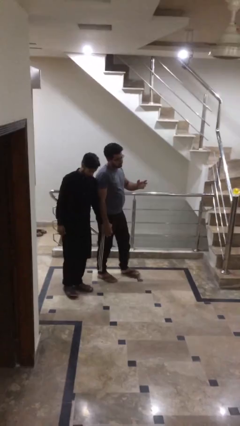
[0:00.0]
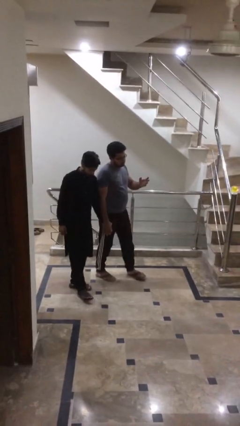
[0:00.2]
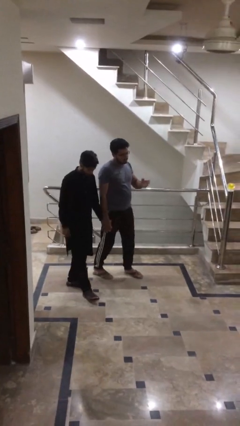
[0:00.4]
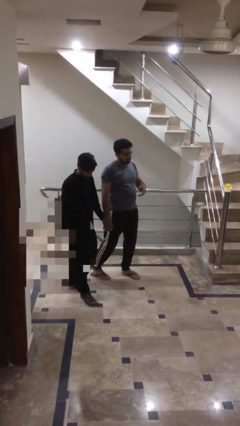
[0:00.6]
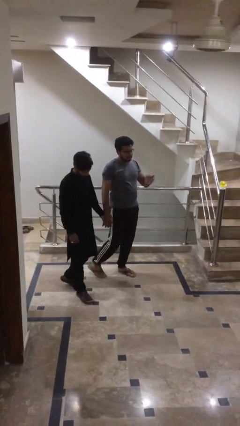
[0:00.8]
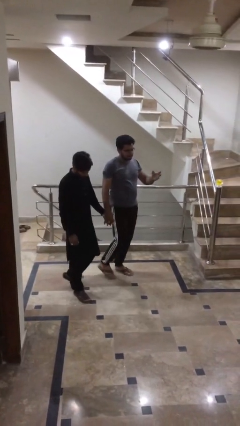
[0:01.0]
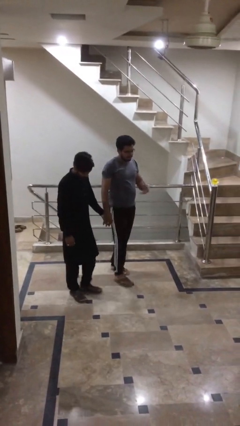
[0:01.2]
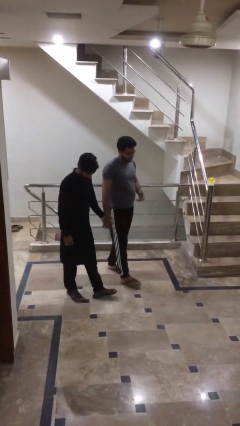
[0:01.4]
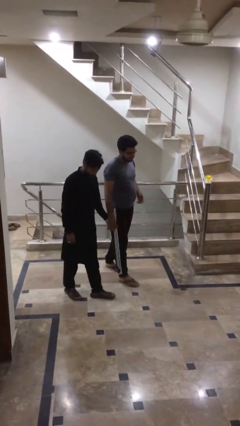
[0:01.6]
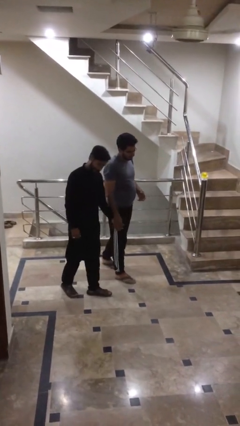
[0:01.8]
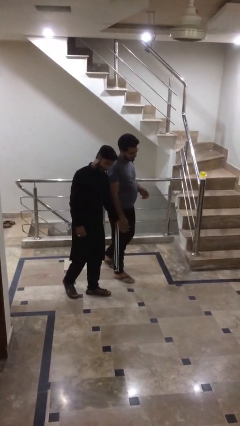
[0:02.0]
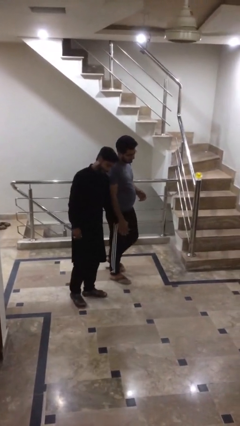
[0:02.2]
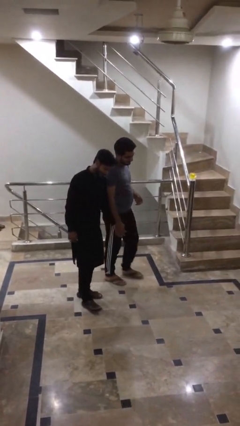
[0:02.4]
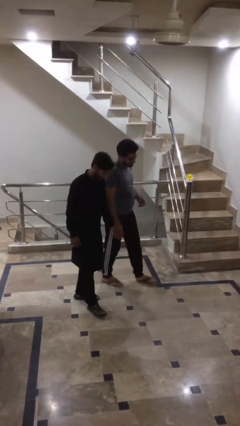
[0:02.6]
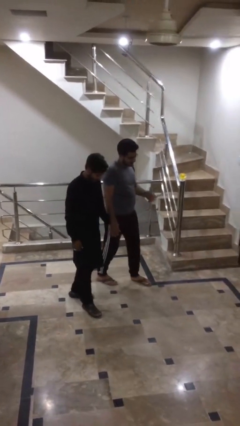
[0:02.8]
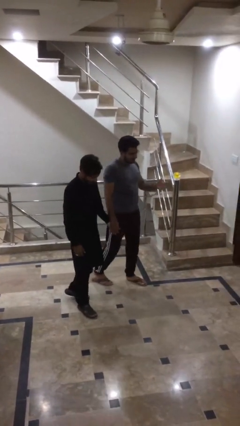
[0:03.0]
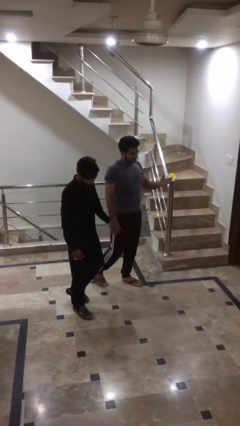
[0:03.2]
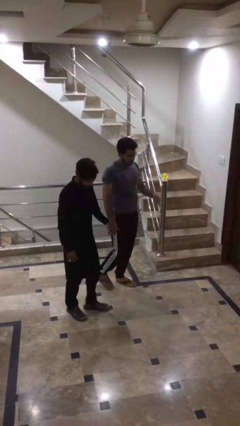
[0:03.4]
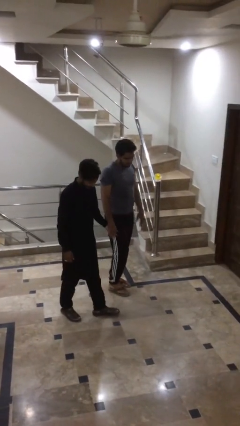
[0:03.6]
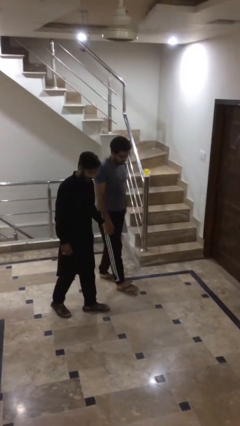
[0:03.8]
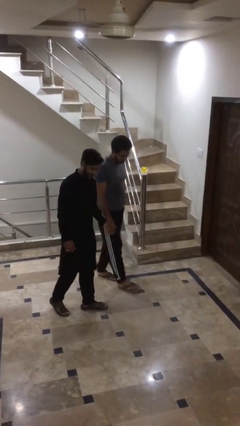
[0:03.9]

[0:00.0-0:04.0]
person holds hand

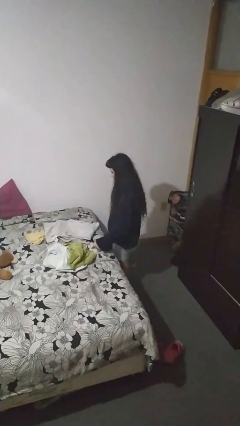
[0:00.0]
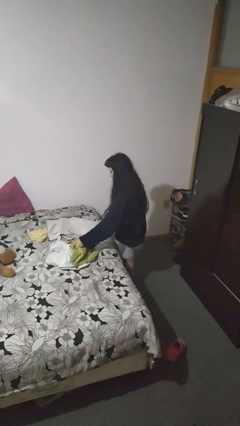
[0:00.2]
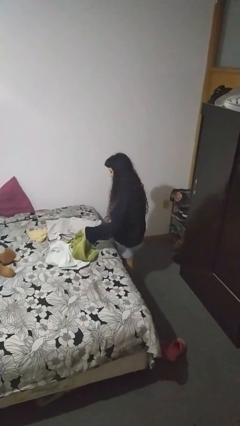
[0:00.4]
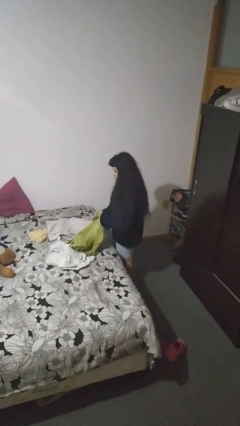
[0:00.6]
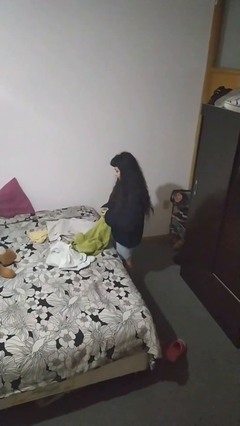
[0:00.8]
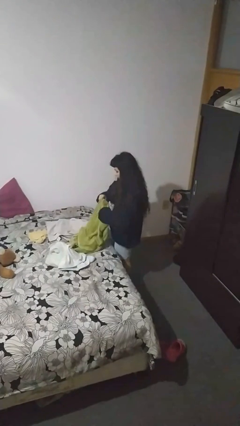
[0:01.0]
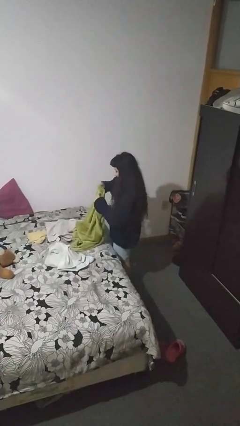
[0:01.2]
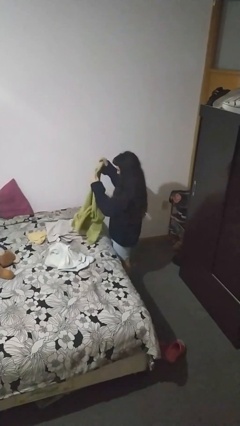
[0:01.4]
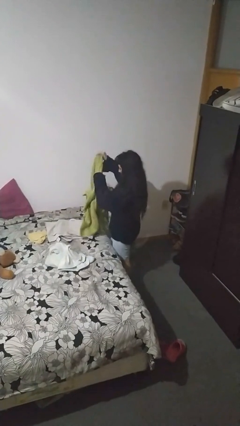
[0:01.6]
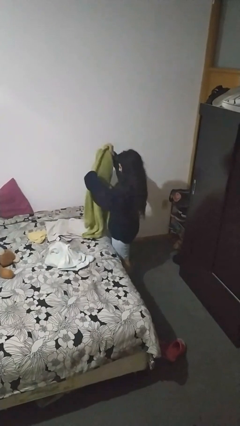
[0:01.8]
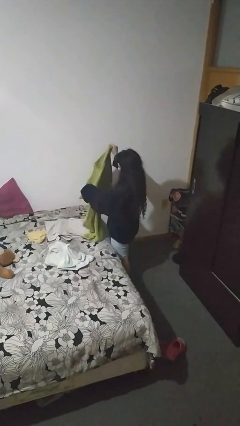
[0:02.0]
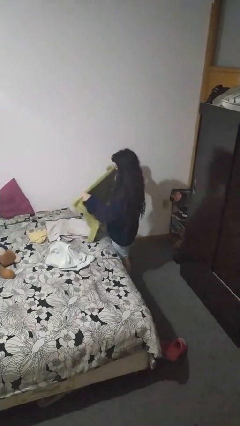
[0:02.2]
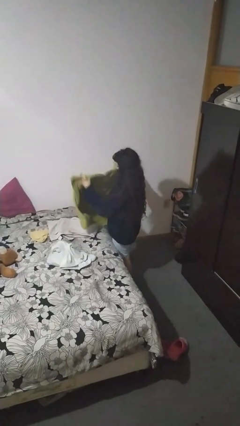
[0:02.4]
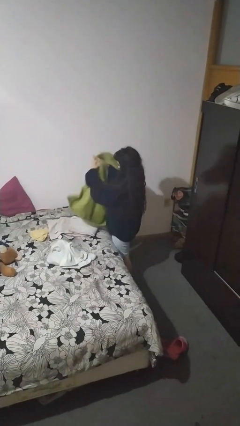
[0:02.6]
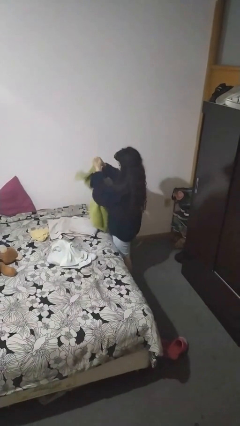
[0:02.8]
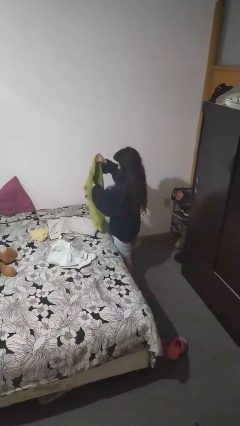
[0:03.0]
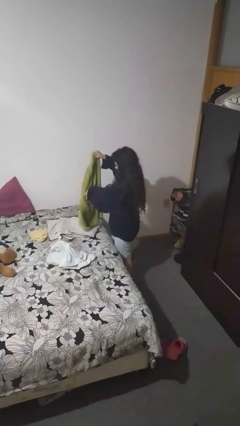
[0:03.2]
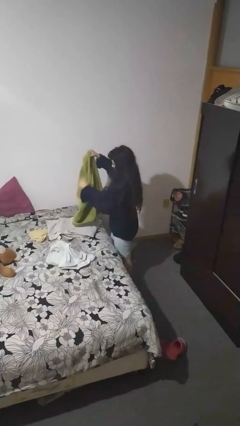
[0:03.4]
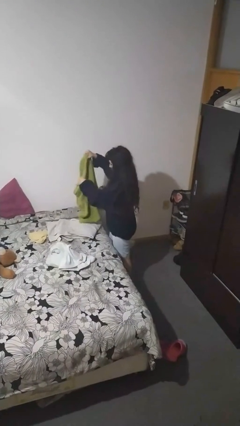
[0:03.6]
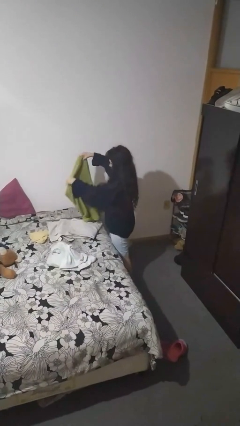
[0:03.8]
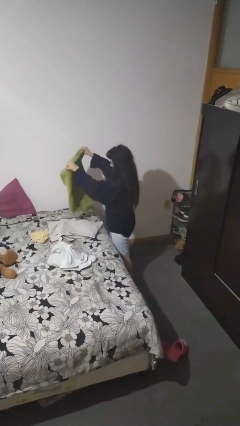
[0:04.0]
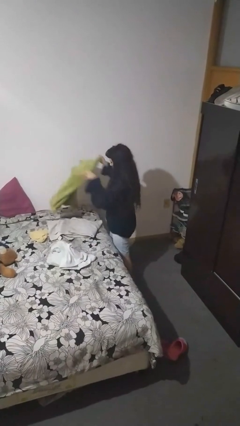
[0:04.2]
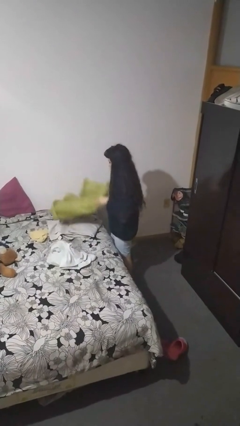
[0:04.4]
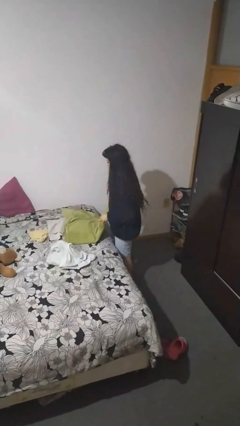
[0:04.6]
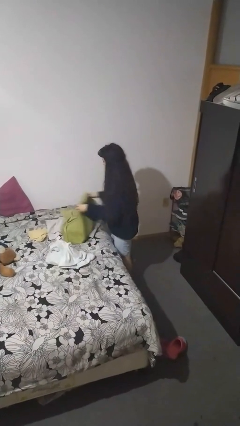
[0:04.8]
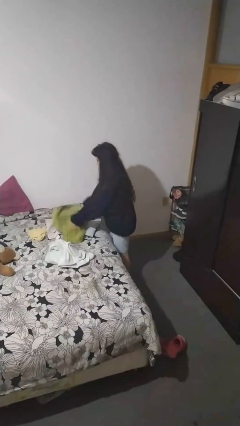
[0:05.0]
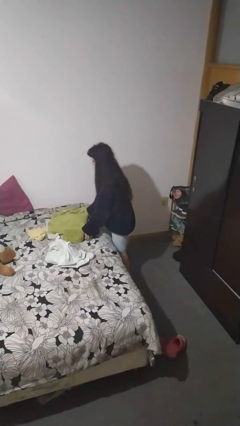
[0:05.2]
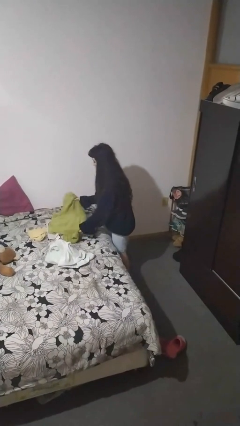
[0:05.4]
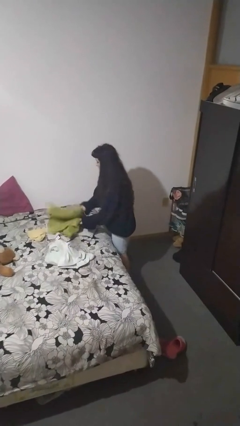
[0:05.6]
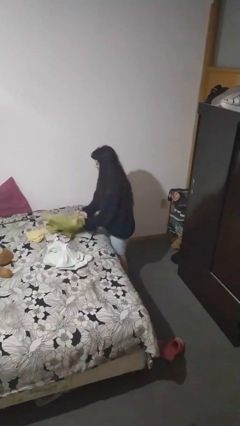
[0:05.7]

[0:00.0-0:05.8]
person folds towel

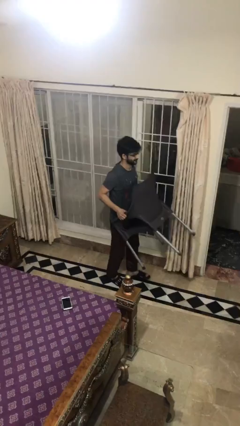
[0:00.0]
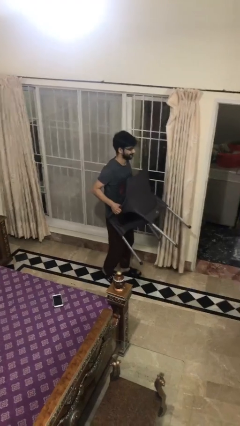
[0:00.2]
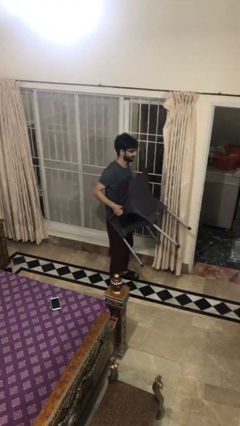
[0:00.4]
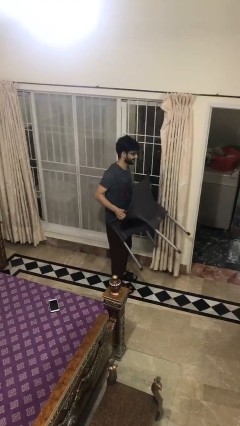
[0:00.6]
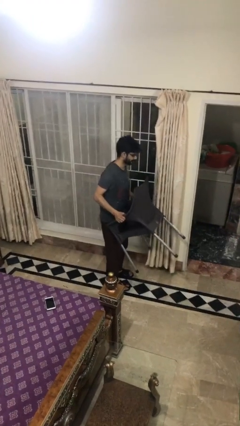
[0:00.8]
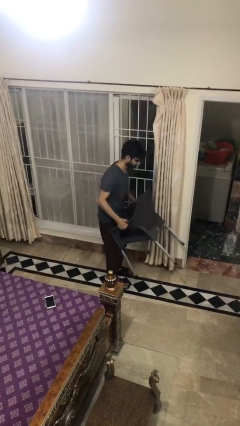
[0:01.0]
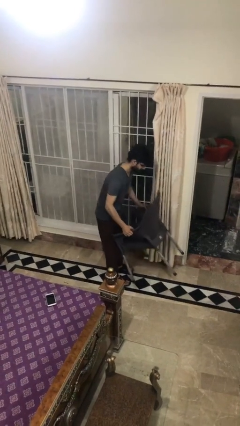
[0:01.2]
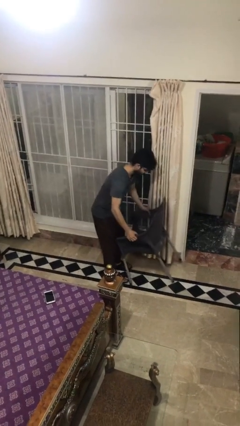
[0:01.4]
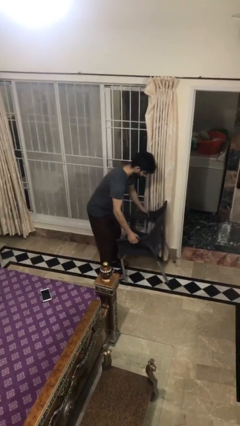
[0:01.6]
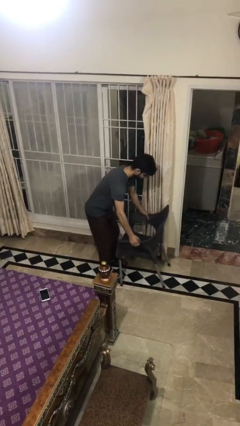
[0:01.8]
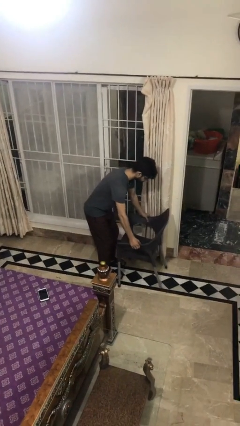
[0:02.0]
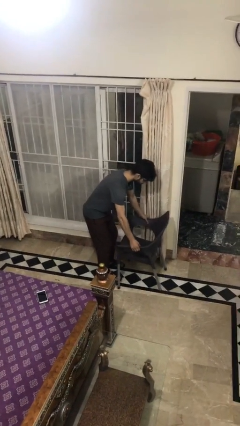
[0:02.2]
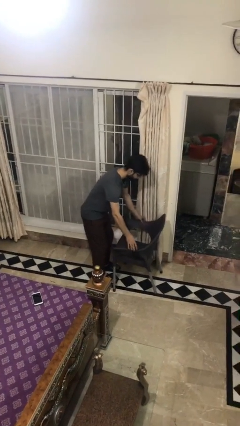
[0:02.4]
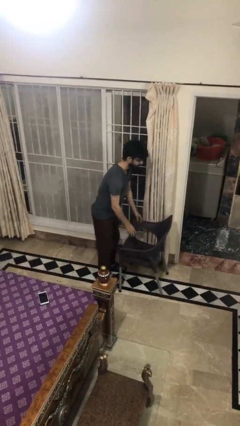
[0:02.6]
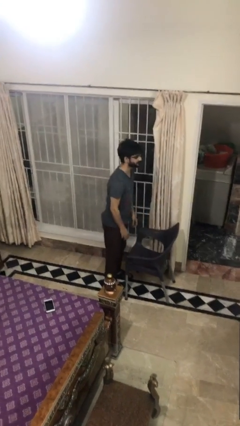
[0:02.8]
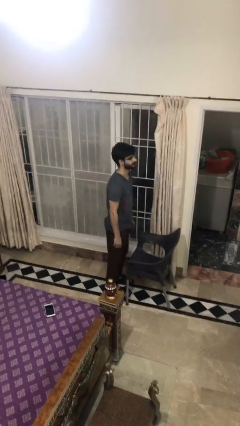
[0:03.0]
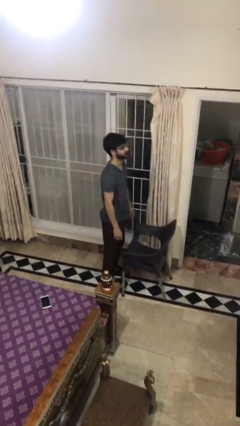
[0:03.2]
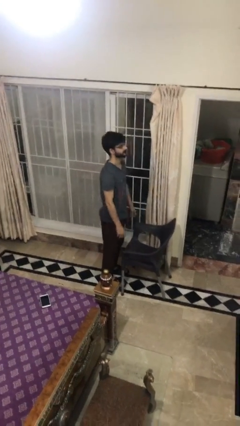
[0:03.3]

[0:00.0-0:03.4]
person puts down object on floor

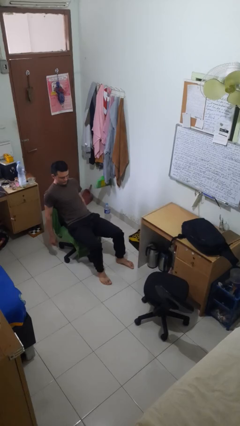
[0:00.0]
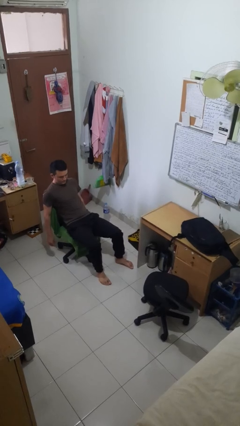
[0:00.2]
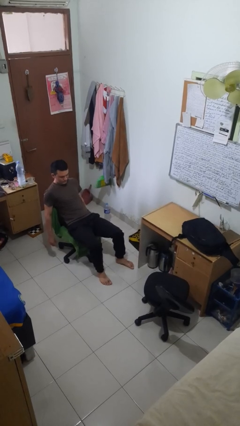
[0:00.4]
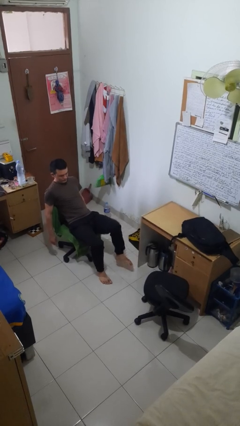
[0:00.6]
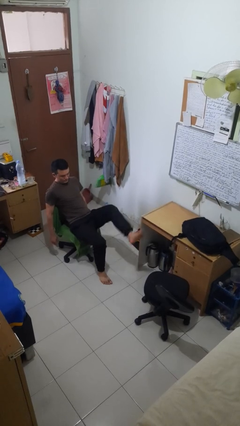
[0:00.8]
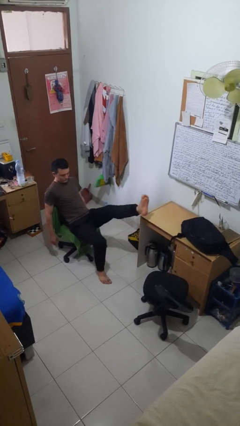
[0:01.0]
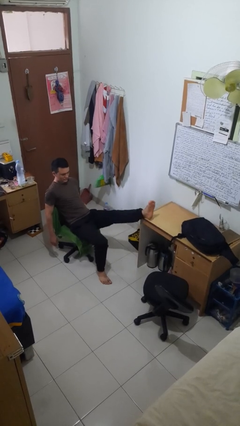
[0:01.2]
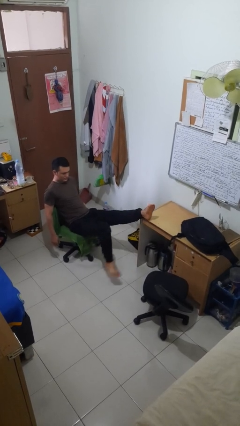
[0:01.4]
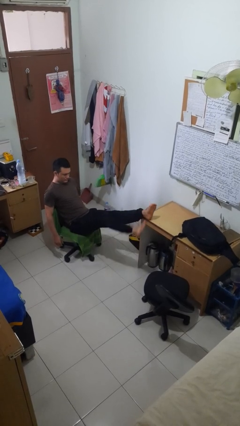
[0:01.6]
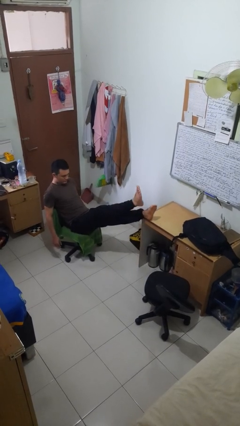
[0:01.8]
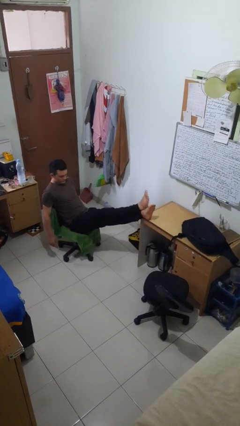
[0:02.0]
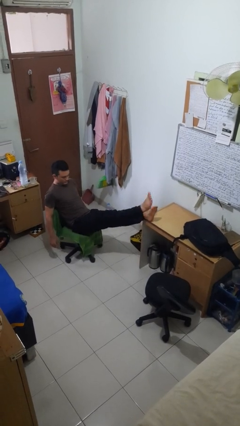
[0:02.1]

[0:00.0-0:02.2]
person puts feet up

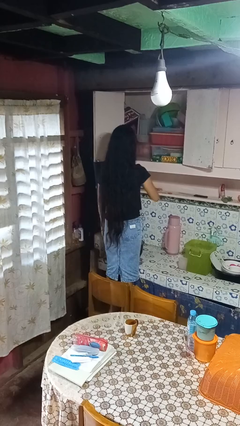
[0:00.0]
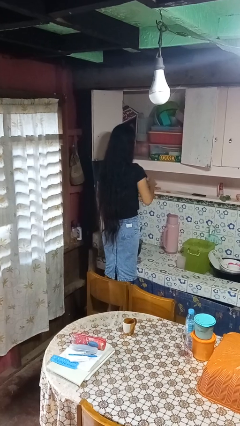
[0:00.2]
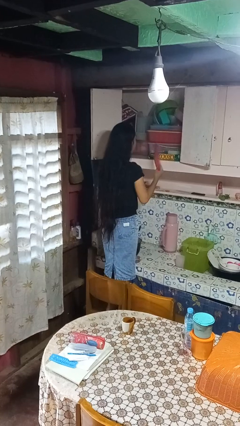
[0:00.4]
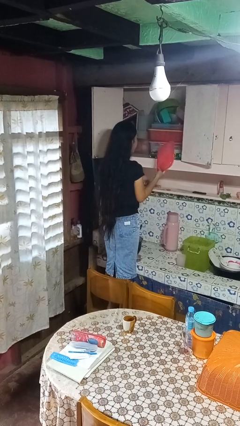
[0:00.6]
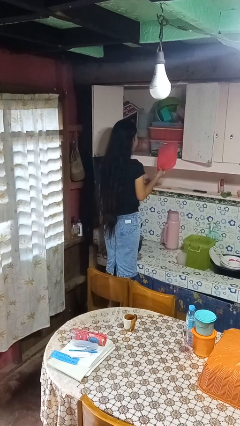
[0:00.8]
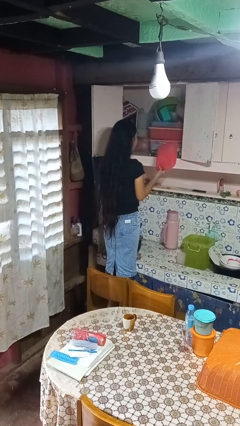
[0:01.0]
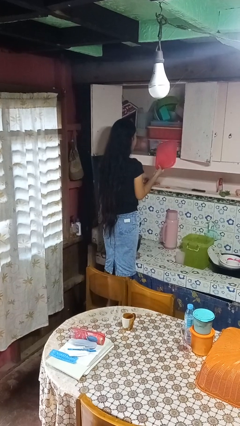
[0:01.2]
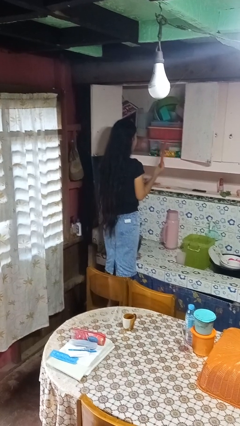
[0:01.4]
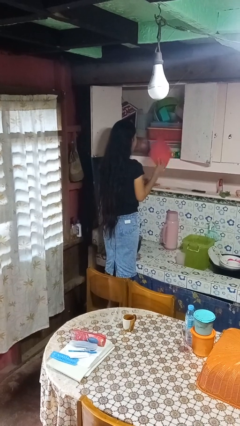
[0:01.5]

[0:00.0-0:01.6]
person takes object from cabinet

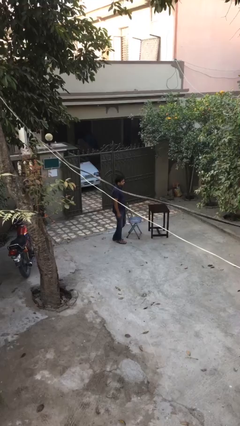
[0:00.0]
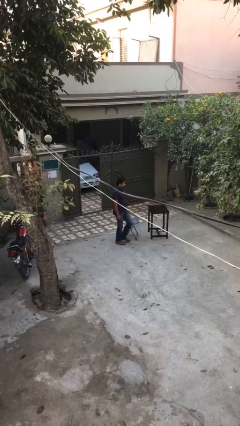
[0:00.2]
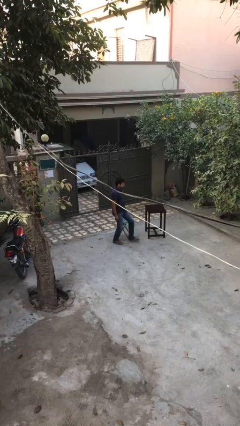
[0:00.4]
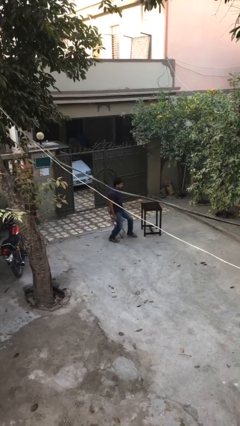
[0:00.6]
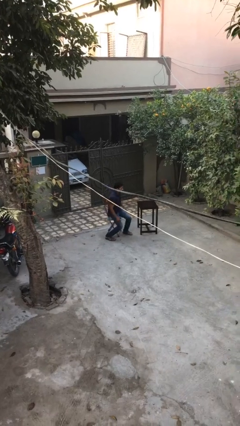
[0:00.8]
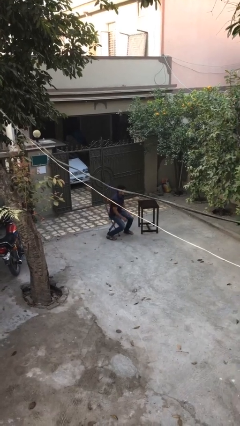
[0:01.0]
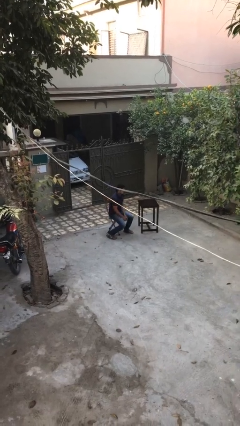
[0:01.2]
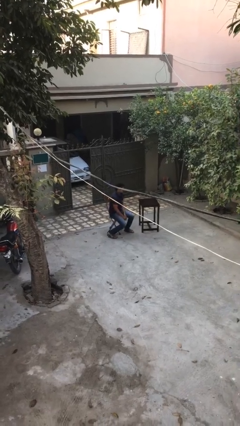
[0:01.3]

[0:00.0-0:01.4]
person sits down
